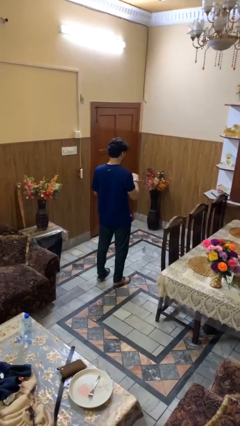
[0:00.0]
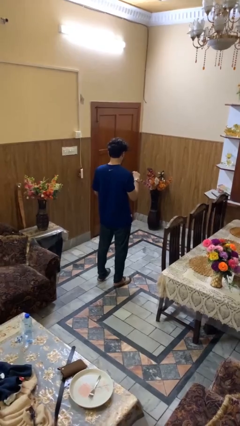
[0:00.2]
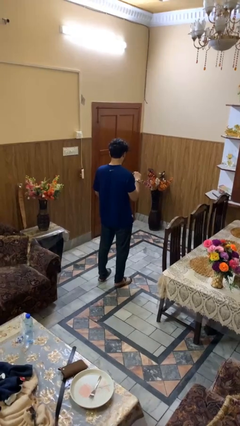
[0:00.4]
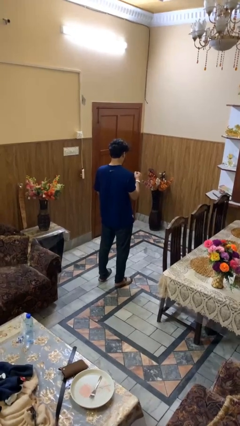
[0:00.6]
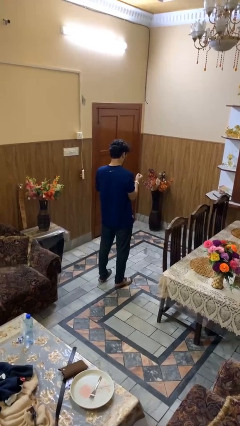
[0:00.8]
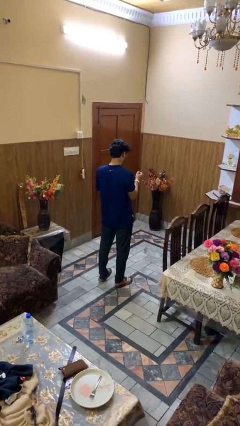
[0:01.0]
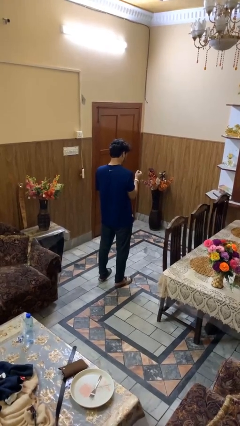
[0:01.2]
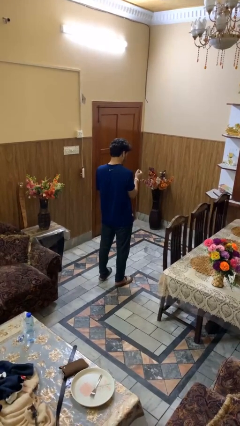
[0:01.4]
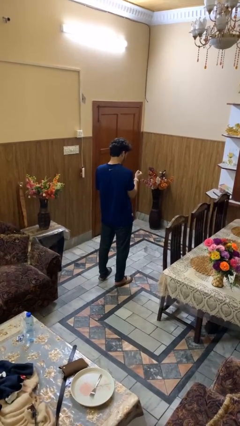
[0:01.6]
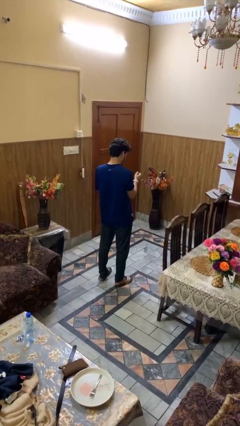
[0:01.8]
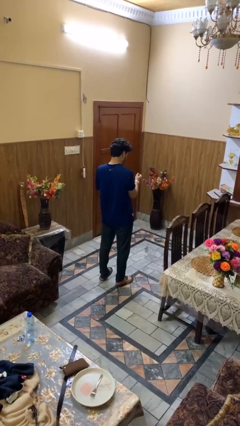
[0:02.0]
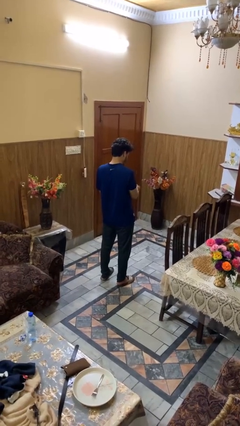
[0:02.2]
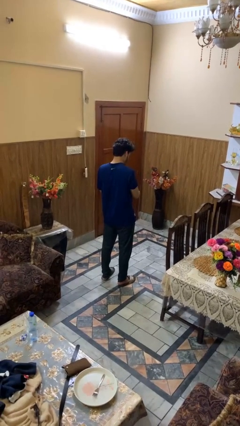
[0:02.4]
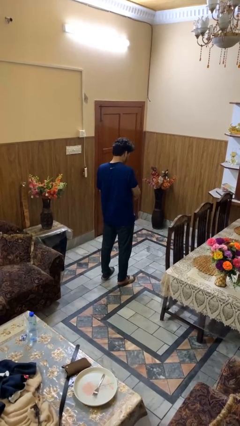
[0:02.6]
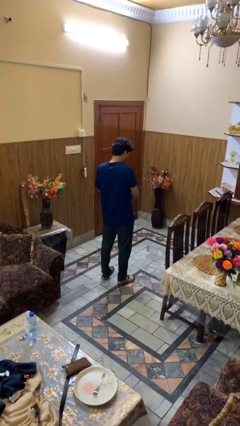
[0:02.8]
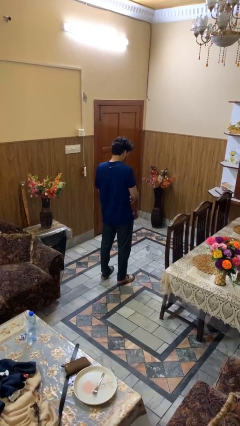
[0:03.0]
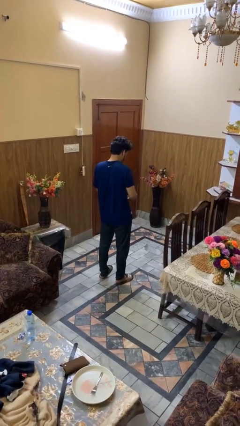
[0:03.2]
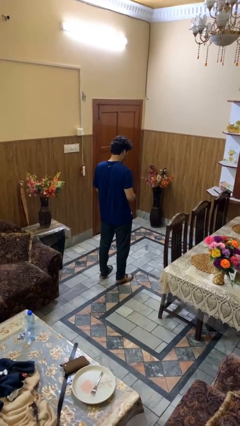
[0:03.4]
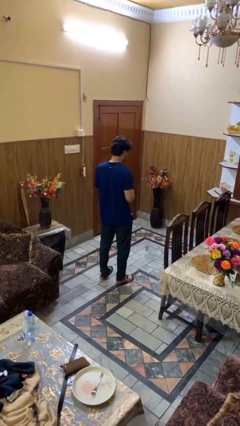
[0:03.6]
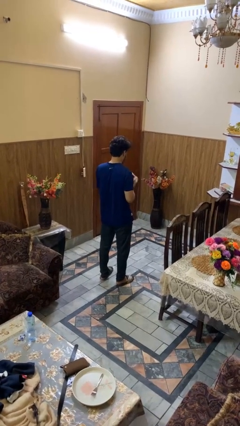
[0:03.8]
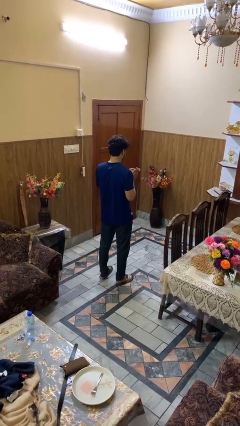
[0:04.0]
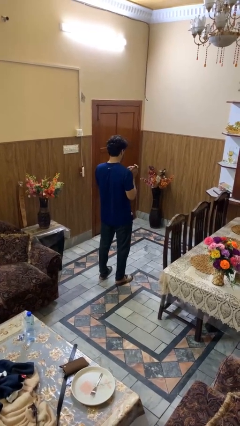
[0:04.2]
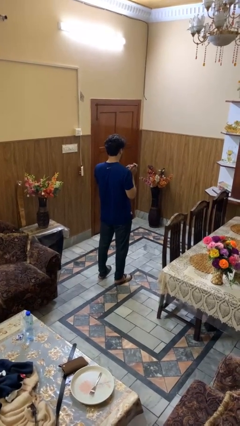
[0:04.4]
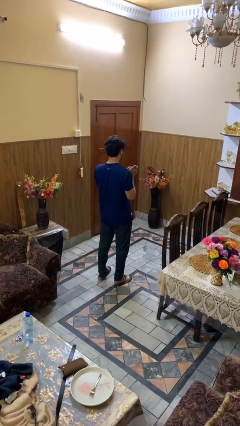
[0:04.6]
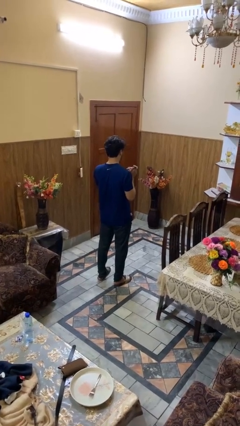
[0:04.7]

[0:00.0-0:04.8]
person takes off wristwatch

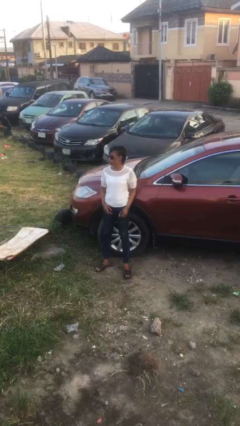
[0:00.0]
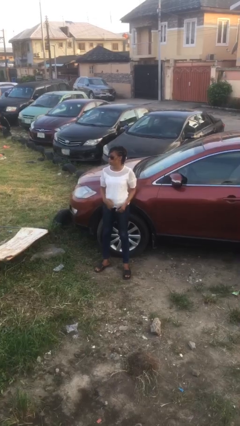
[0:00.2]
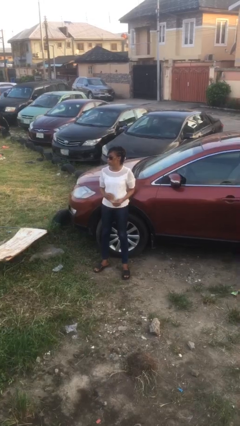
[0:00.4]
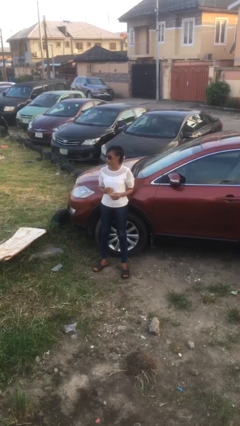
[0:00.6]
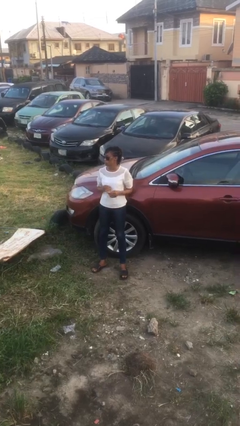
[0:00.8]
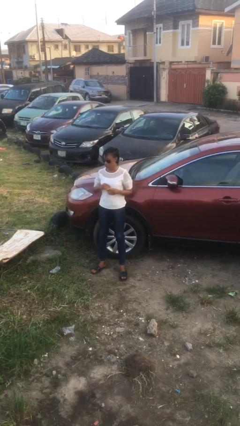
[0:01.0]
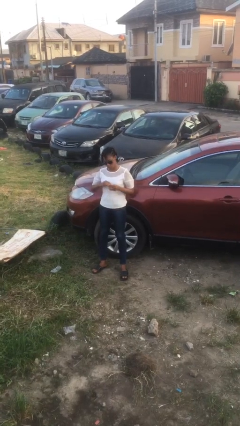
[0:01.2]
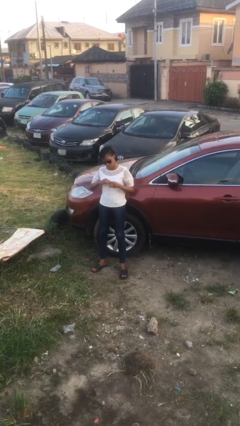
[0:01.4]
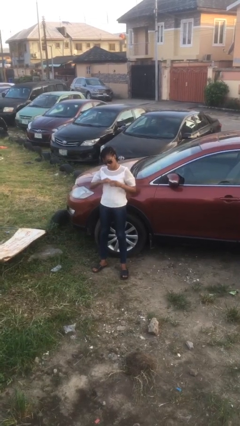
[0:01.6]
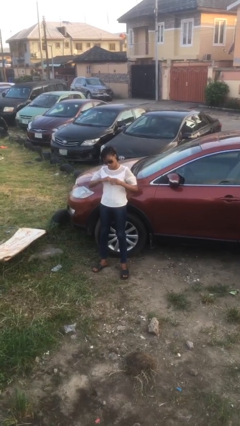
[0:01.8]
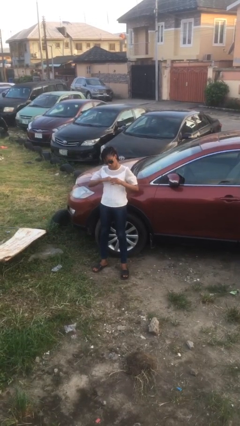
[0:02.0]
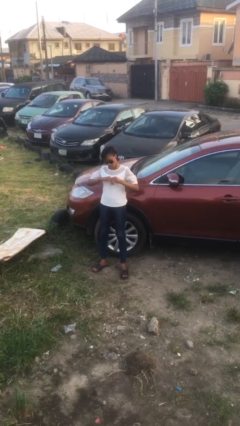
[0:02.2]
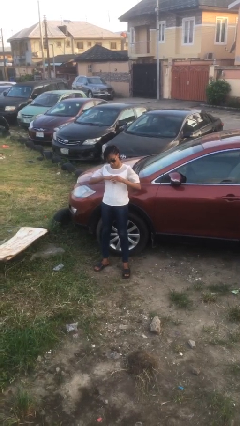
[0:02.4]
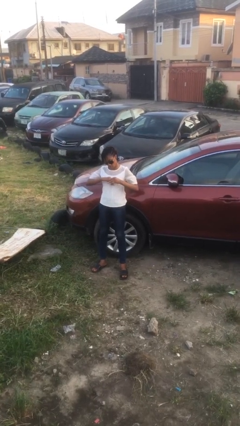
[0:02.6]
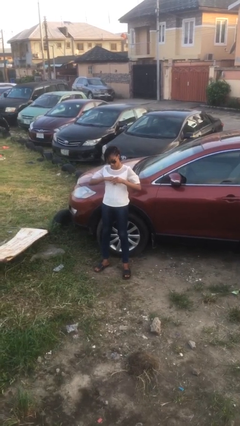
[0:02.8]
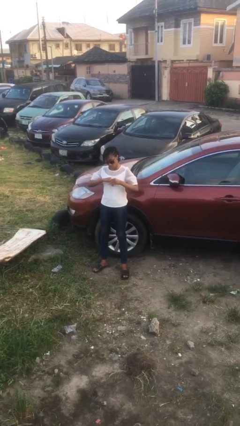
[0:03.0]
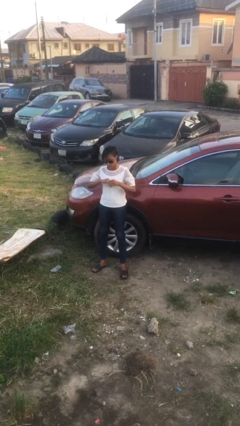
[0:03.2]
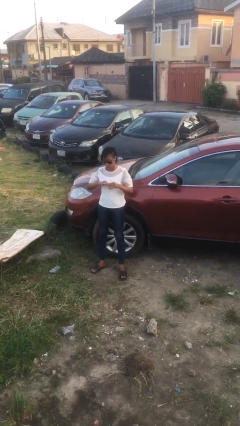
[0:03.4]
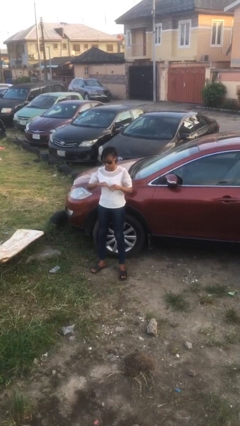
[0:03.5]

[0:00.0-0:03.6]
person puts on ring

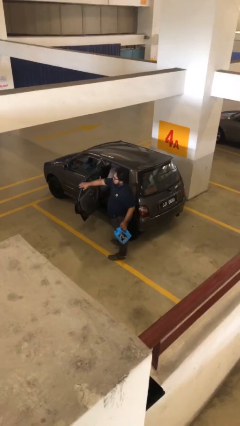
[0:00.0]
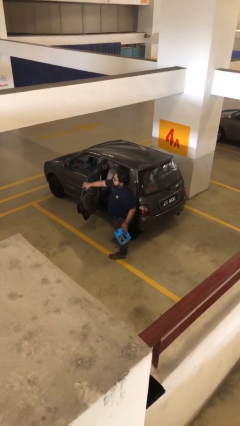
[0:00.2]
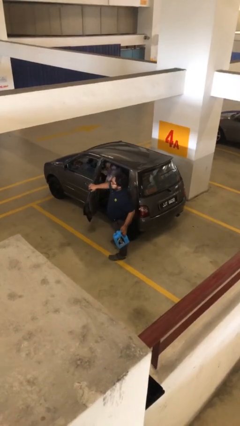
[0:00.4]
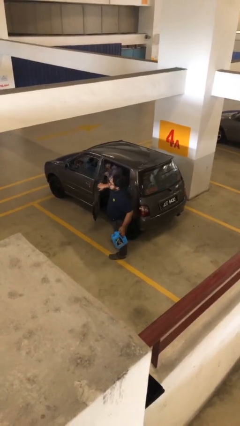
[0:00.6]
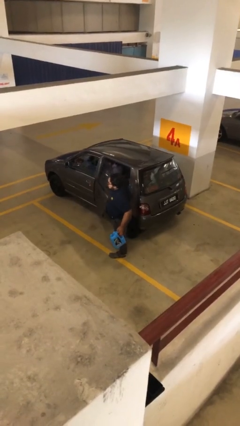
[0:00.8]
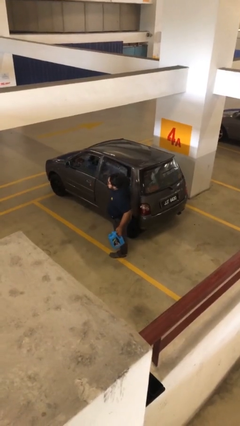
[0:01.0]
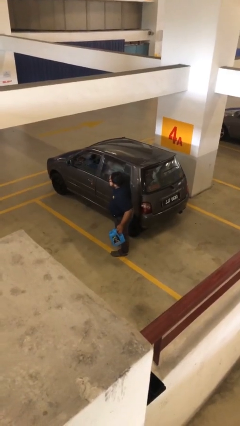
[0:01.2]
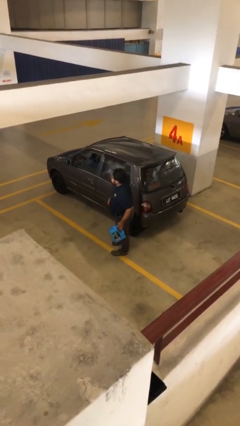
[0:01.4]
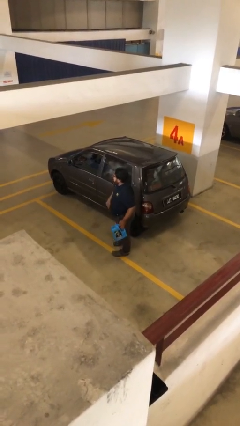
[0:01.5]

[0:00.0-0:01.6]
person closes car door

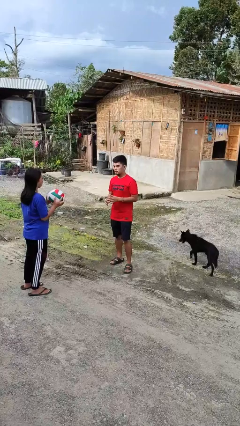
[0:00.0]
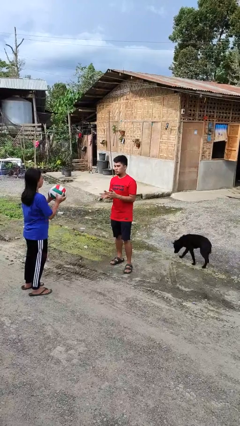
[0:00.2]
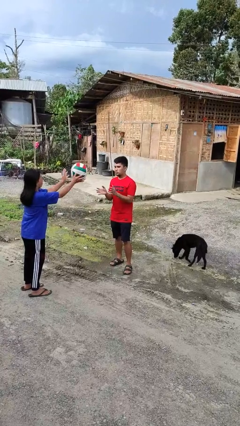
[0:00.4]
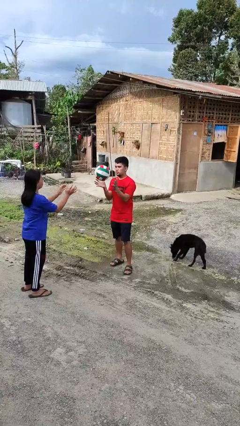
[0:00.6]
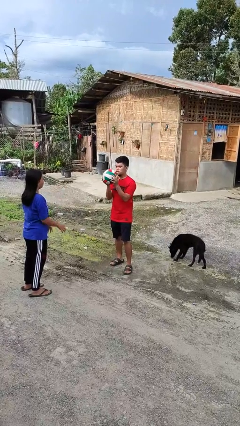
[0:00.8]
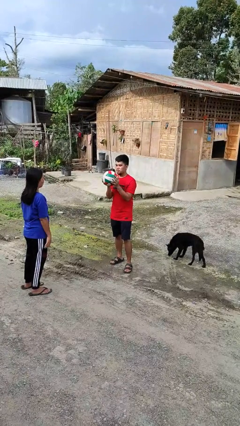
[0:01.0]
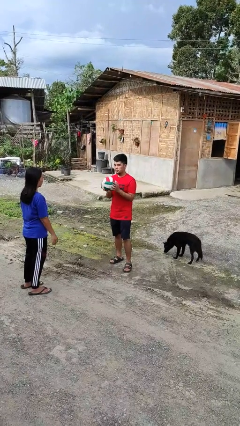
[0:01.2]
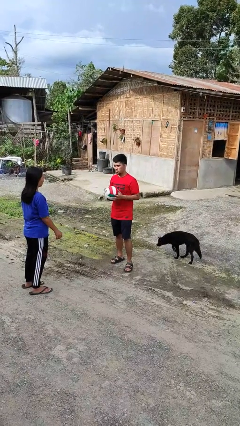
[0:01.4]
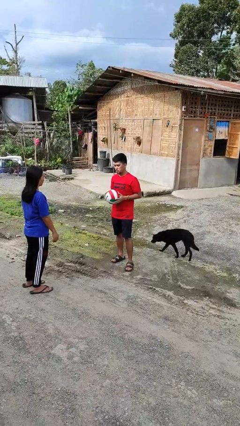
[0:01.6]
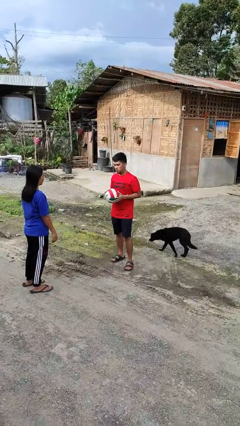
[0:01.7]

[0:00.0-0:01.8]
person catches object from person

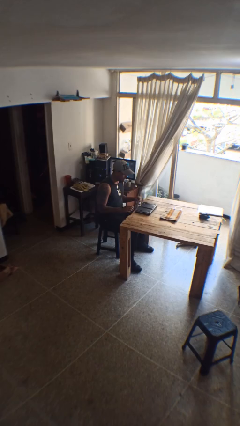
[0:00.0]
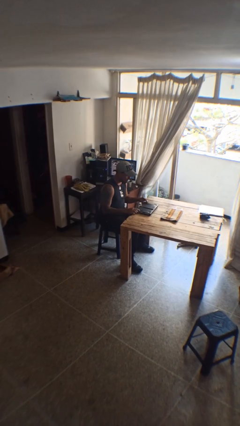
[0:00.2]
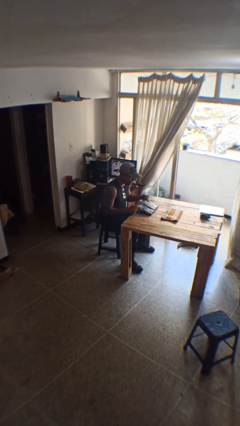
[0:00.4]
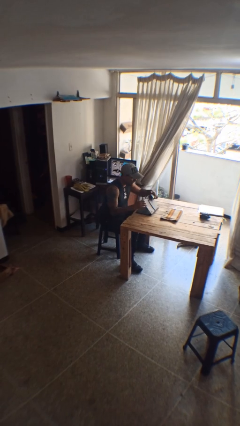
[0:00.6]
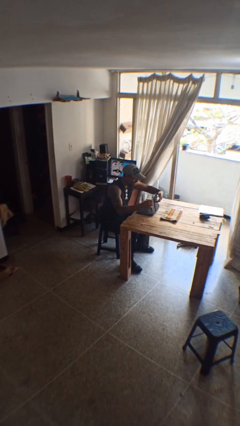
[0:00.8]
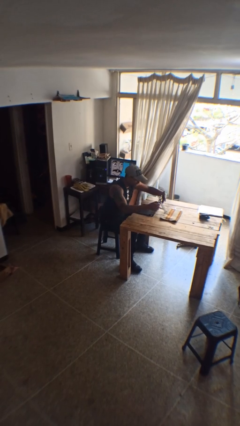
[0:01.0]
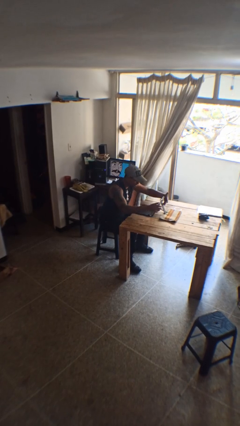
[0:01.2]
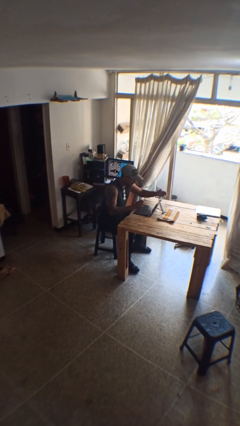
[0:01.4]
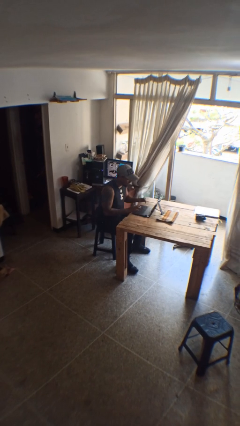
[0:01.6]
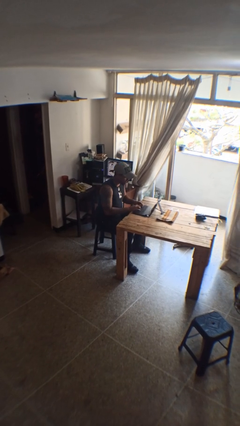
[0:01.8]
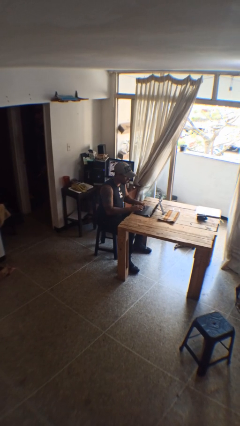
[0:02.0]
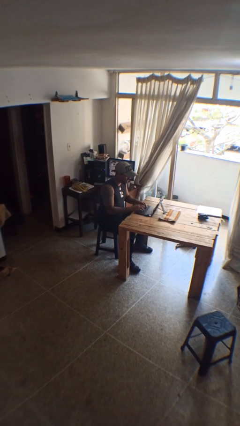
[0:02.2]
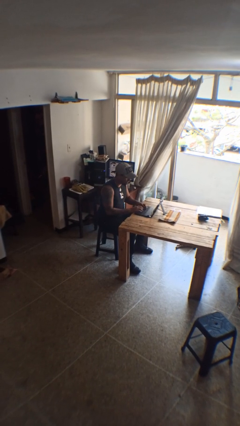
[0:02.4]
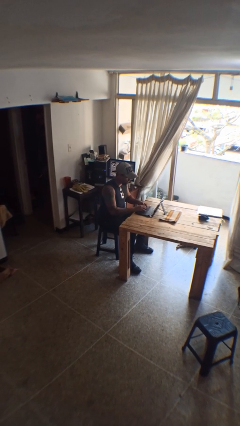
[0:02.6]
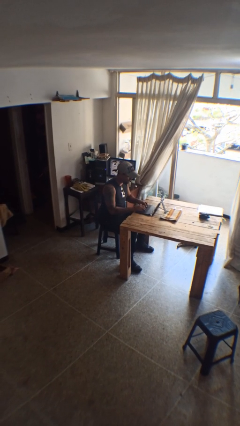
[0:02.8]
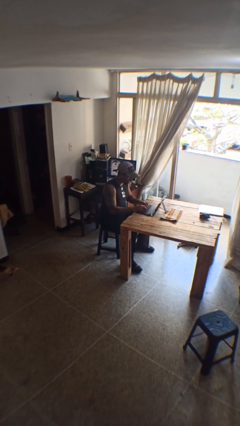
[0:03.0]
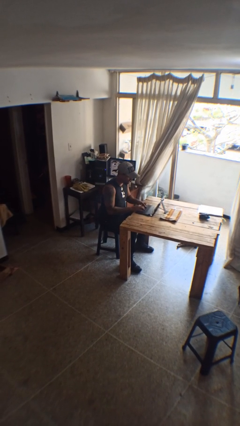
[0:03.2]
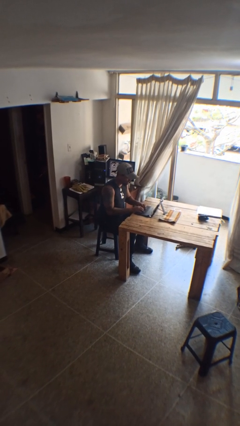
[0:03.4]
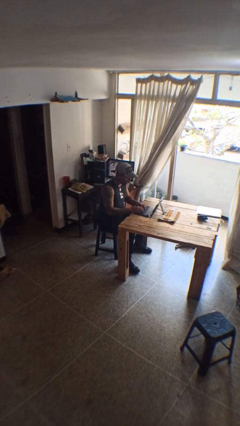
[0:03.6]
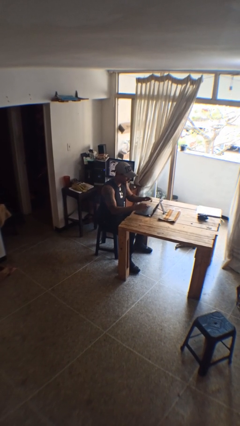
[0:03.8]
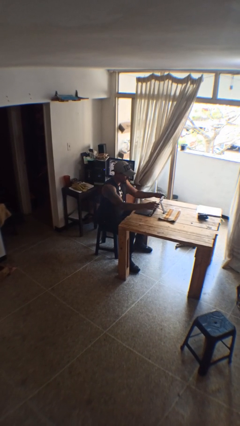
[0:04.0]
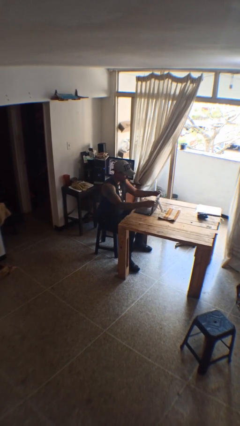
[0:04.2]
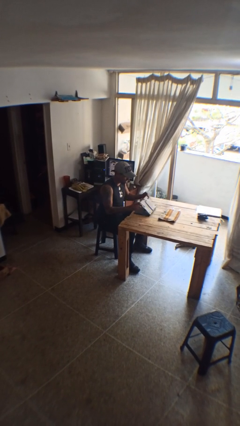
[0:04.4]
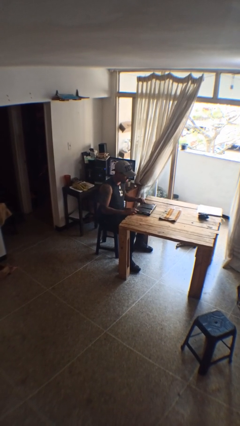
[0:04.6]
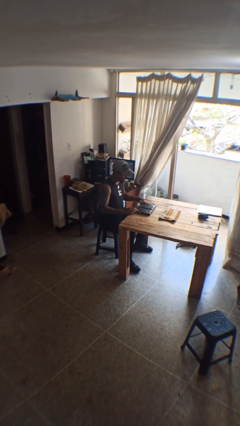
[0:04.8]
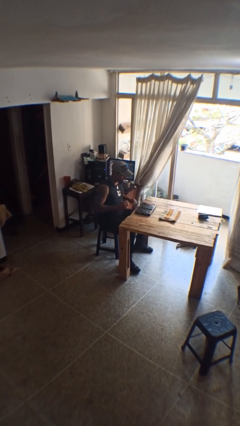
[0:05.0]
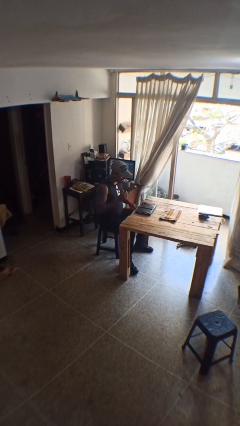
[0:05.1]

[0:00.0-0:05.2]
person interacts with laptop

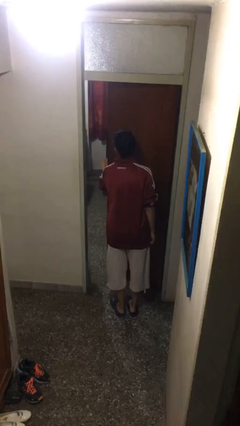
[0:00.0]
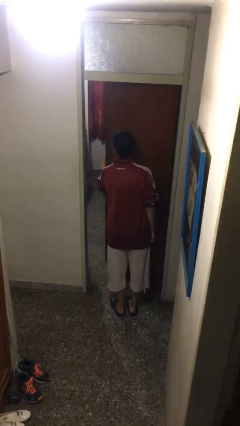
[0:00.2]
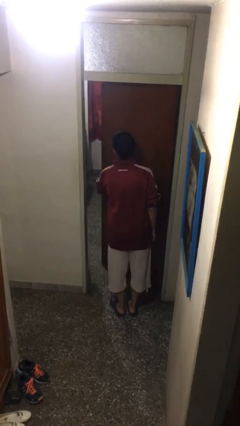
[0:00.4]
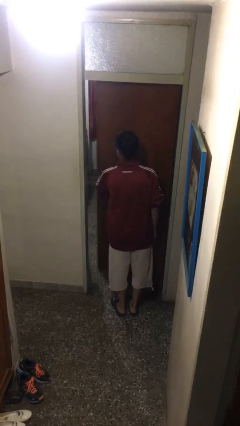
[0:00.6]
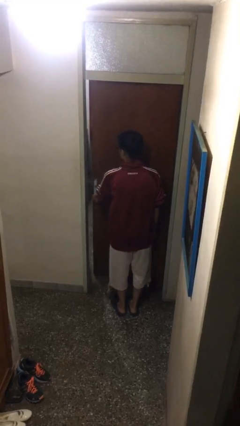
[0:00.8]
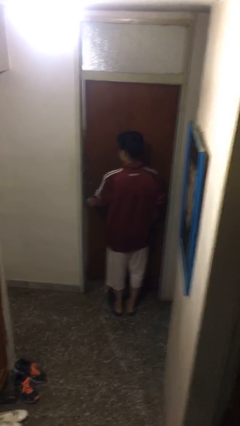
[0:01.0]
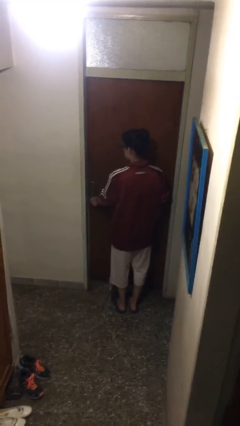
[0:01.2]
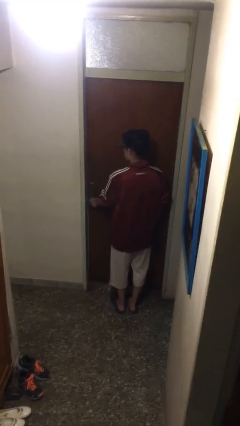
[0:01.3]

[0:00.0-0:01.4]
person closes facility door
